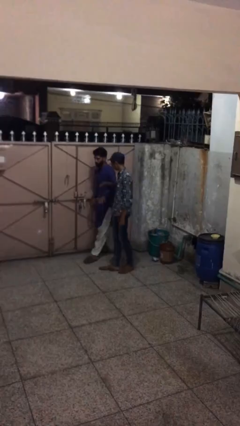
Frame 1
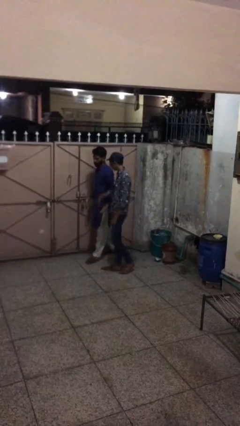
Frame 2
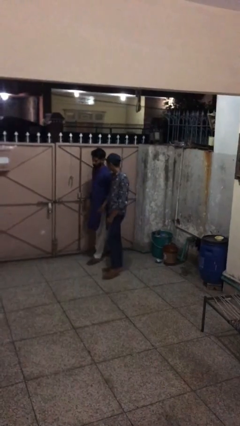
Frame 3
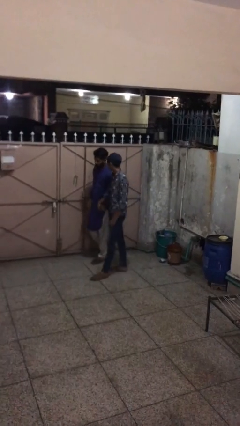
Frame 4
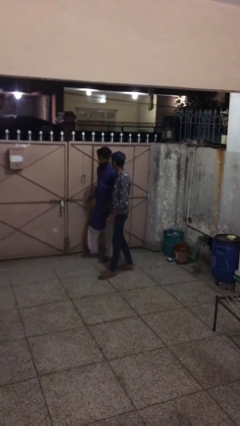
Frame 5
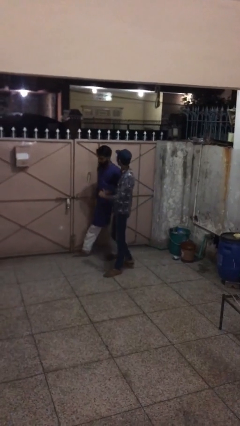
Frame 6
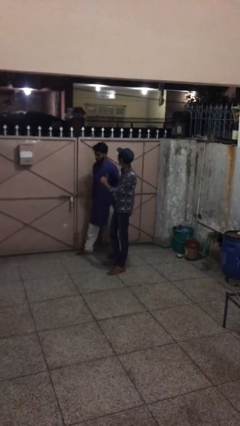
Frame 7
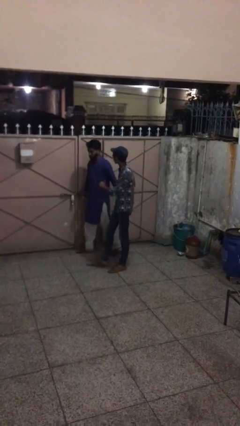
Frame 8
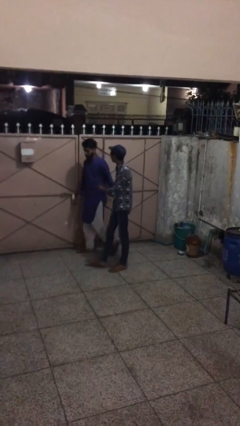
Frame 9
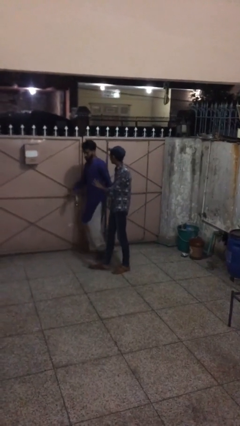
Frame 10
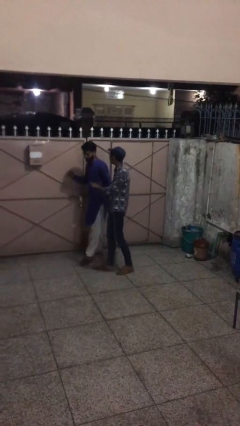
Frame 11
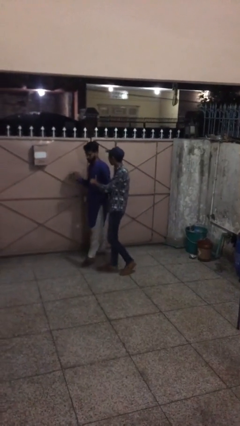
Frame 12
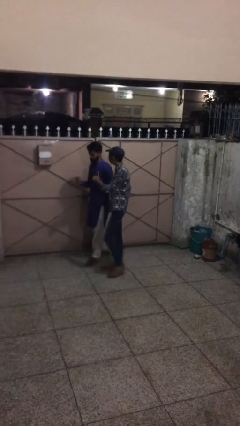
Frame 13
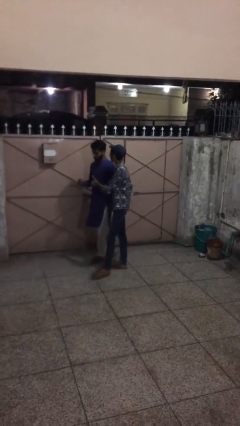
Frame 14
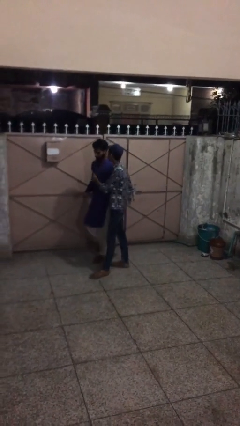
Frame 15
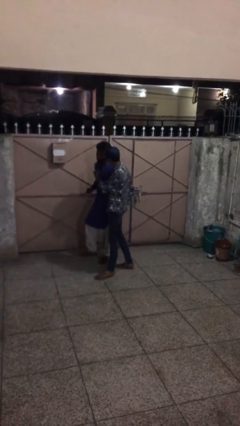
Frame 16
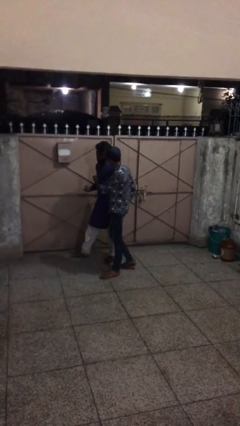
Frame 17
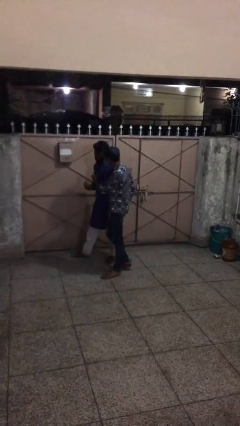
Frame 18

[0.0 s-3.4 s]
person holds hand

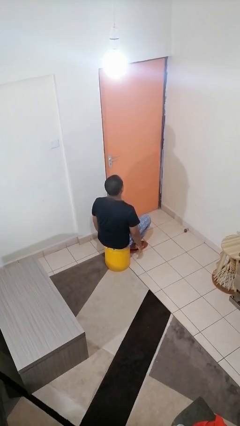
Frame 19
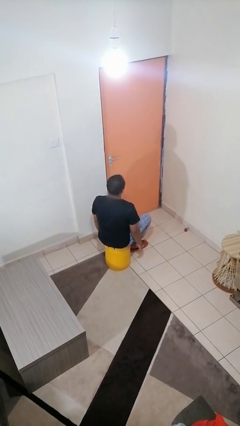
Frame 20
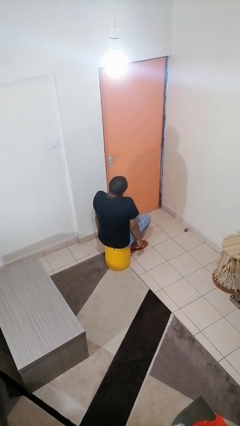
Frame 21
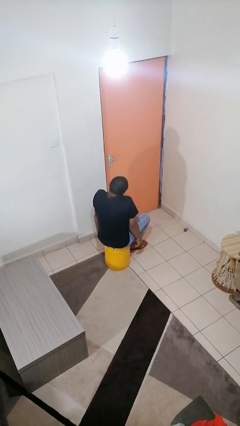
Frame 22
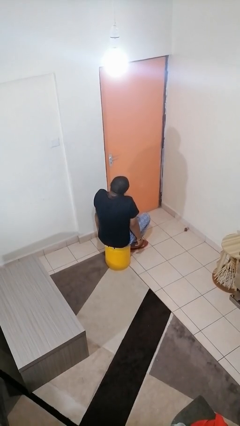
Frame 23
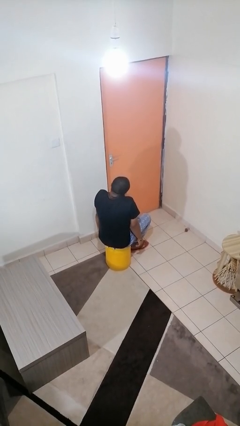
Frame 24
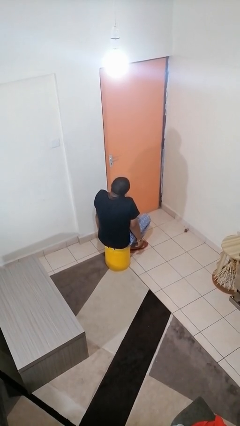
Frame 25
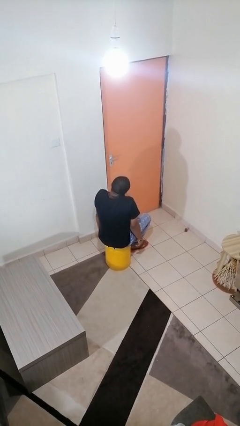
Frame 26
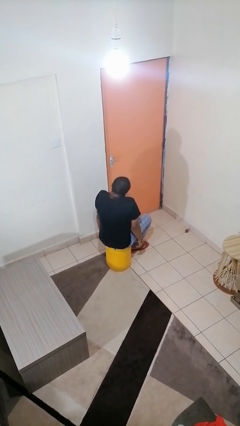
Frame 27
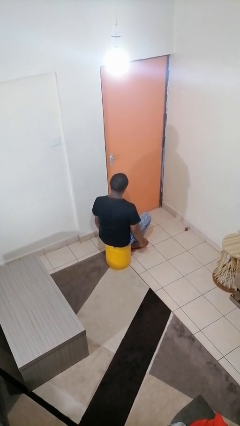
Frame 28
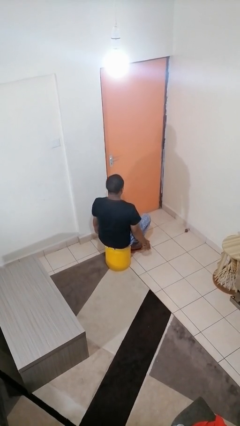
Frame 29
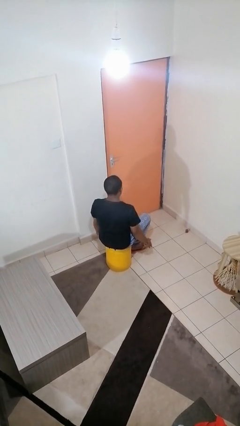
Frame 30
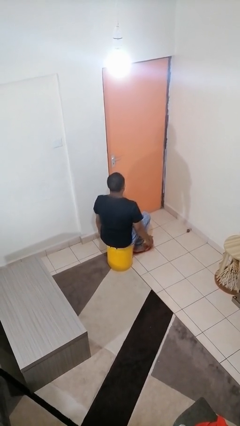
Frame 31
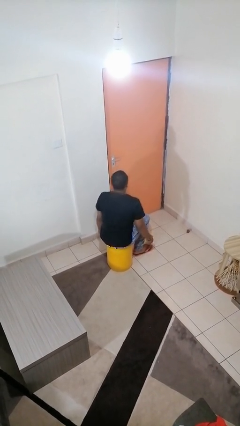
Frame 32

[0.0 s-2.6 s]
person shrugs

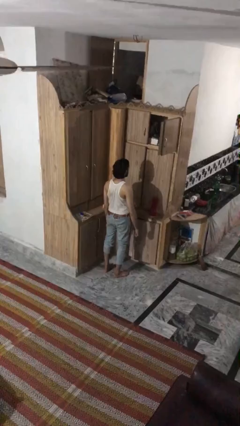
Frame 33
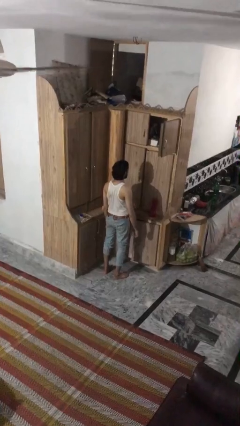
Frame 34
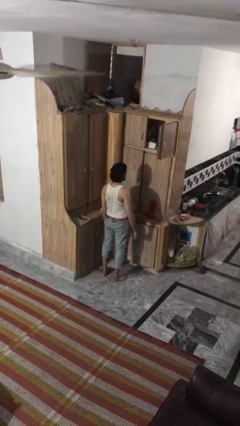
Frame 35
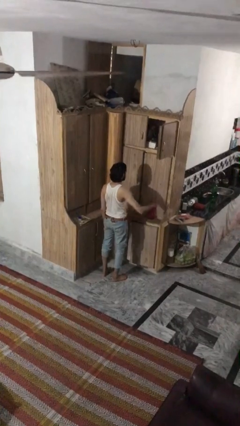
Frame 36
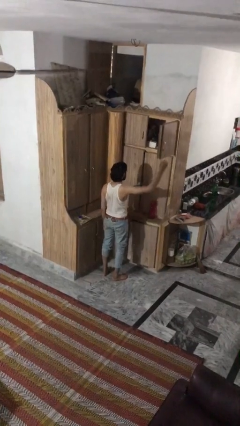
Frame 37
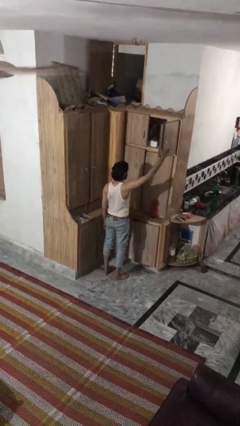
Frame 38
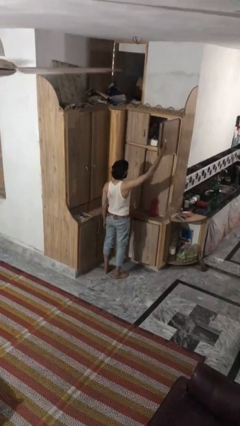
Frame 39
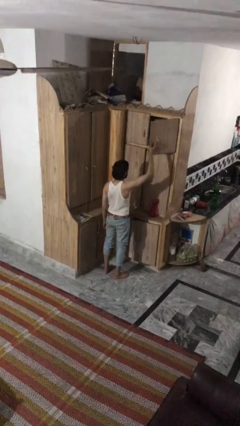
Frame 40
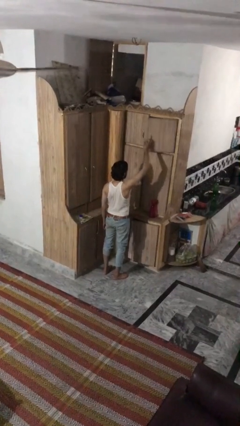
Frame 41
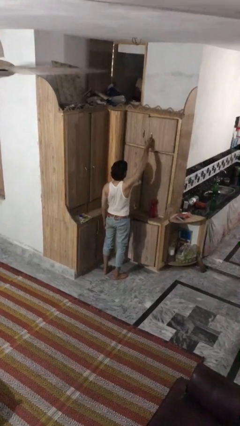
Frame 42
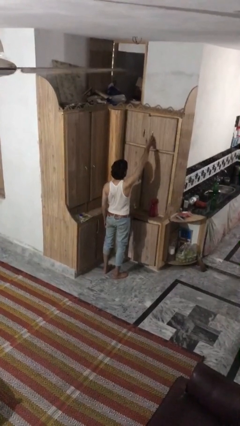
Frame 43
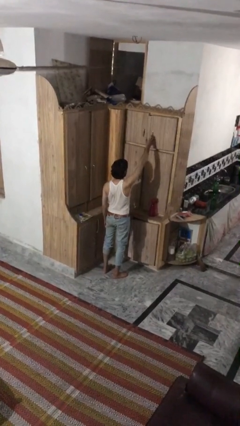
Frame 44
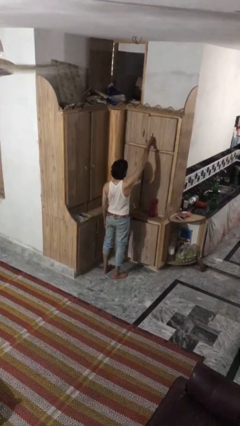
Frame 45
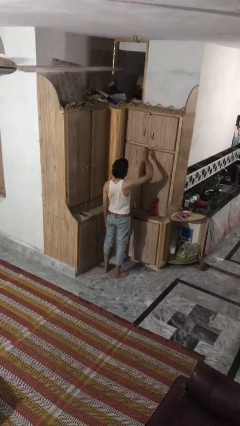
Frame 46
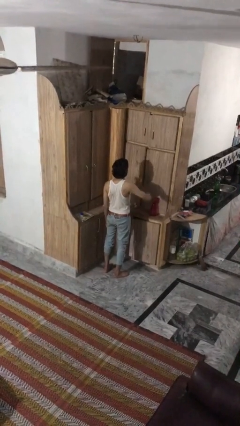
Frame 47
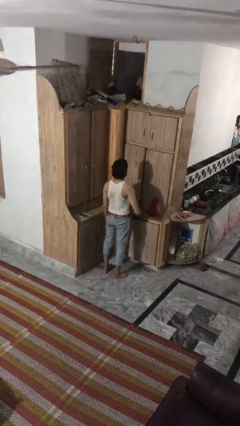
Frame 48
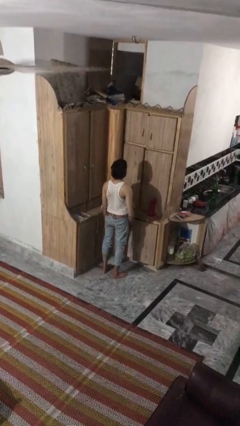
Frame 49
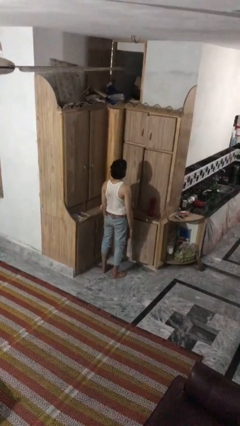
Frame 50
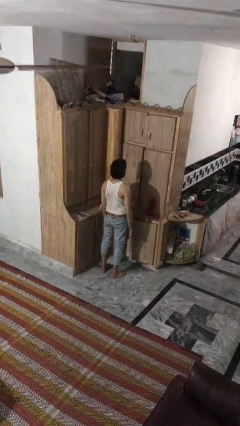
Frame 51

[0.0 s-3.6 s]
person closes cabinet

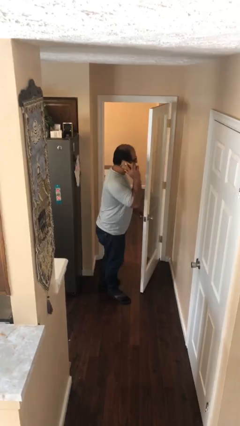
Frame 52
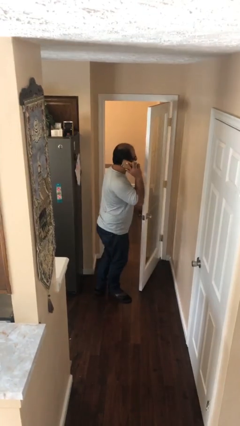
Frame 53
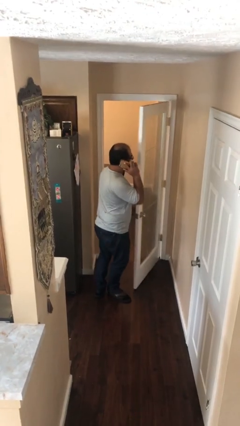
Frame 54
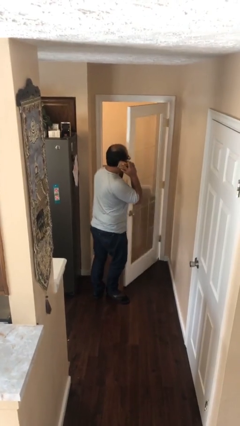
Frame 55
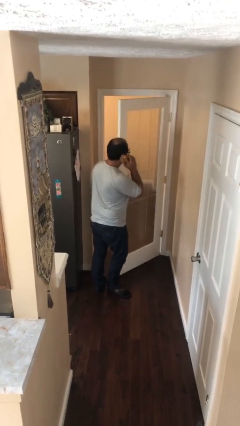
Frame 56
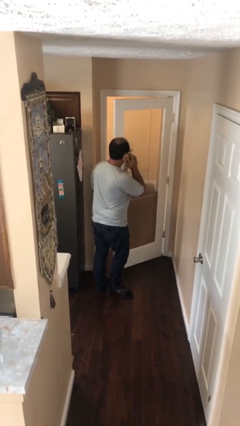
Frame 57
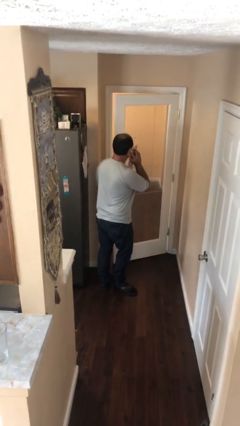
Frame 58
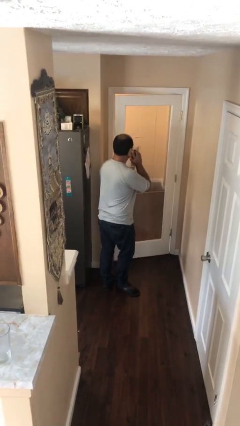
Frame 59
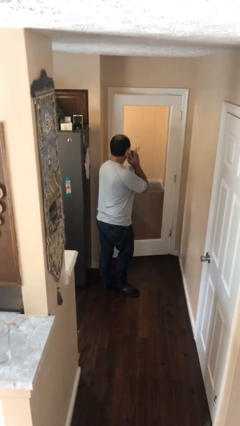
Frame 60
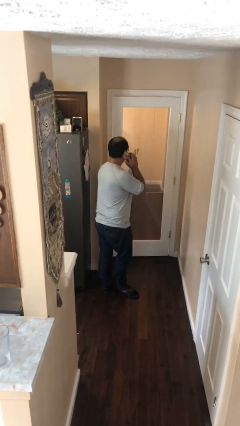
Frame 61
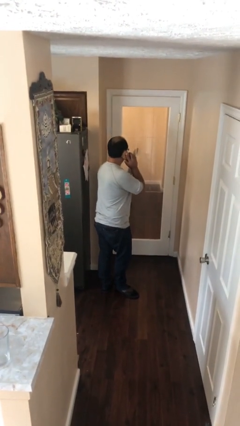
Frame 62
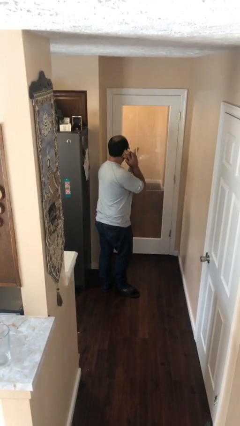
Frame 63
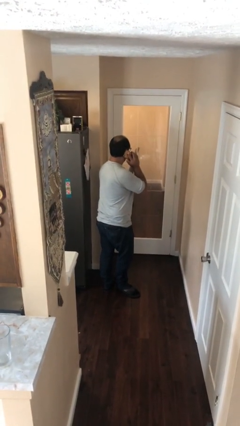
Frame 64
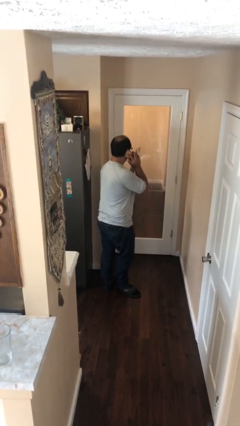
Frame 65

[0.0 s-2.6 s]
person closes facility door

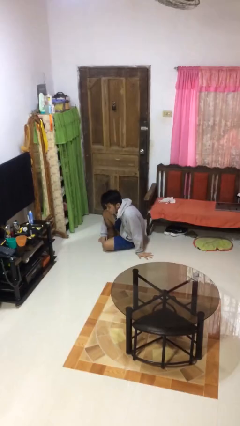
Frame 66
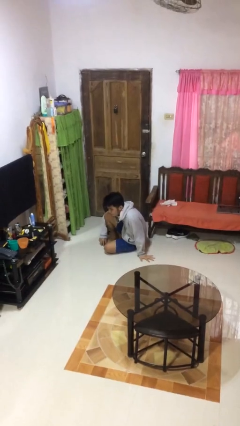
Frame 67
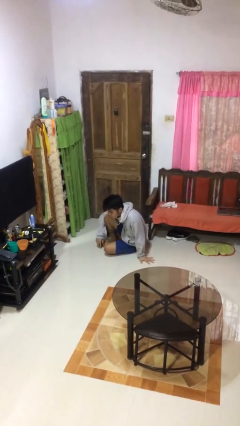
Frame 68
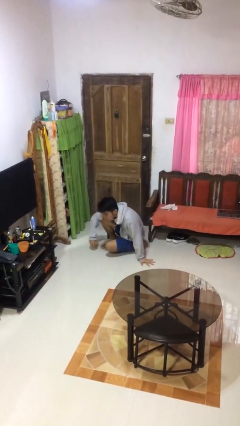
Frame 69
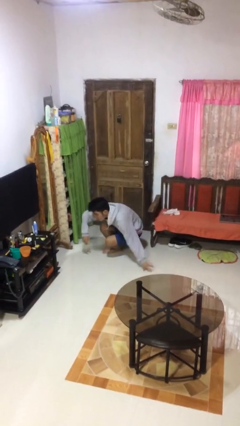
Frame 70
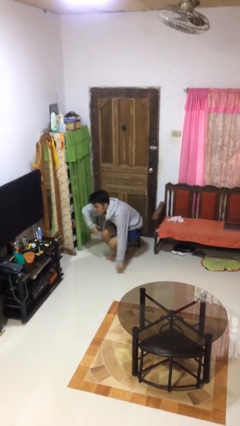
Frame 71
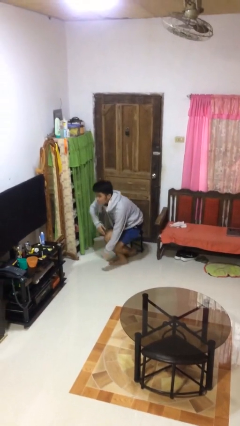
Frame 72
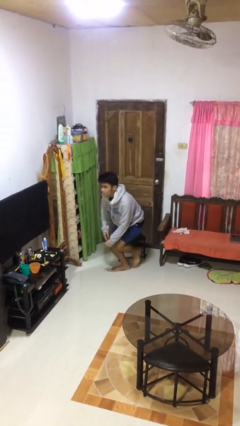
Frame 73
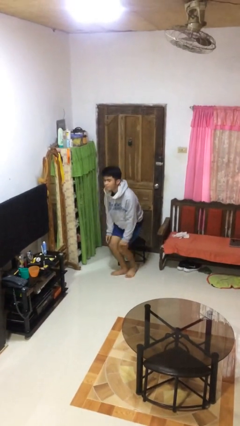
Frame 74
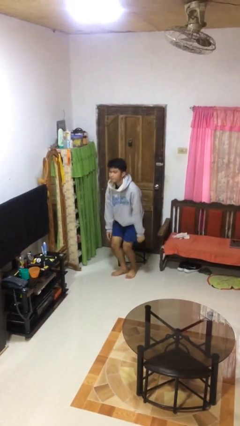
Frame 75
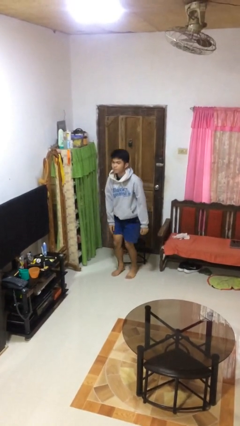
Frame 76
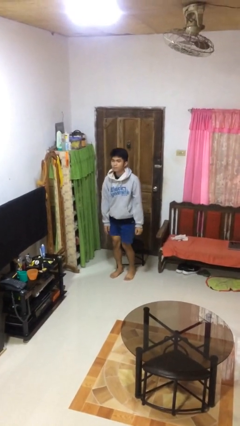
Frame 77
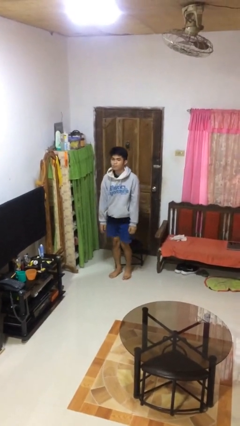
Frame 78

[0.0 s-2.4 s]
person stands up from floor

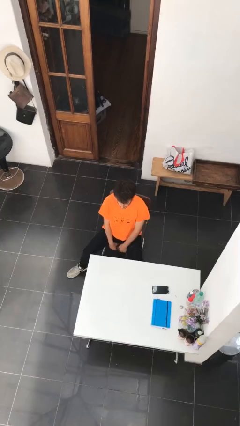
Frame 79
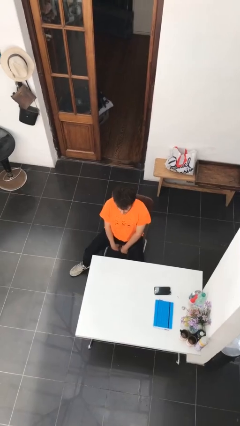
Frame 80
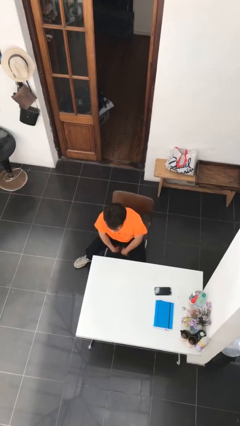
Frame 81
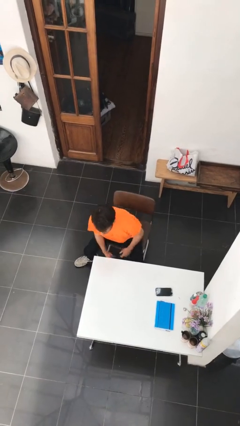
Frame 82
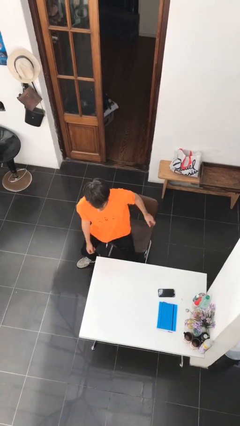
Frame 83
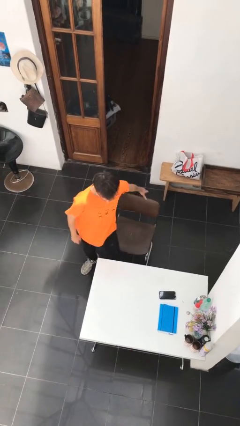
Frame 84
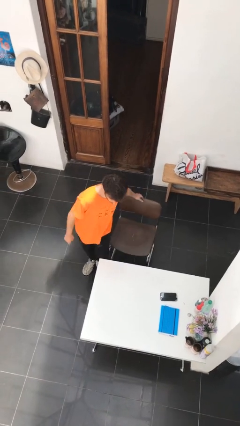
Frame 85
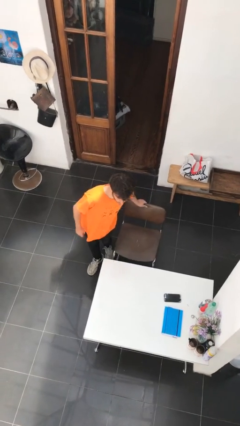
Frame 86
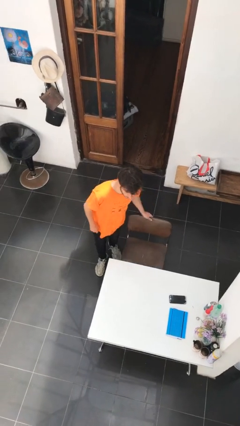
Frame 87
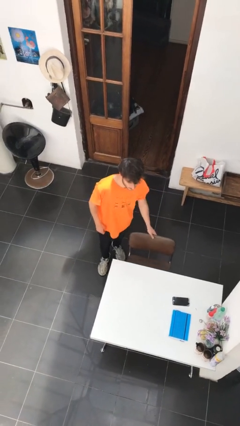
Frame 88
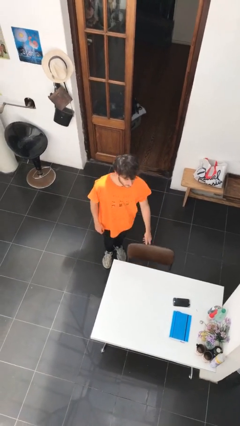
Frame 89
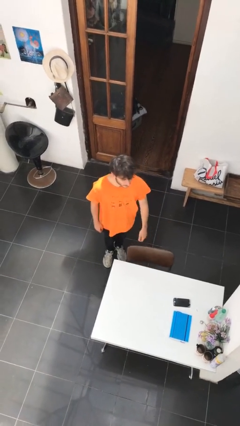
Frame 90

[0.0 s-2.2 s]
person stands up

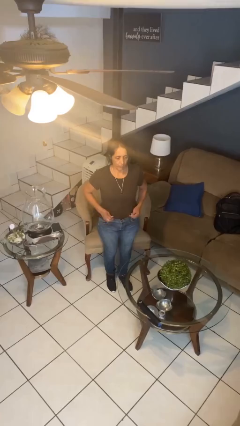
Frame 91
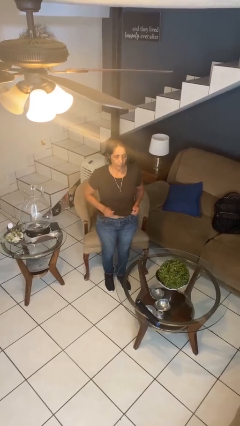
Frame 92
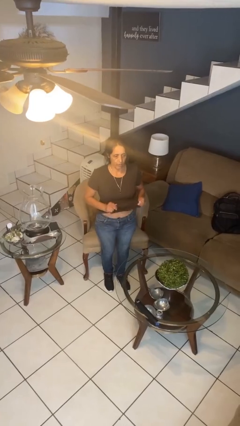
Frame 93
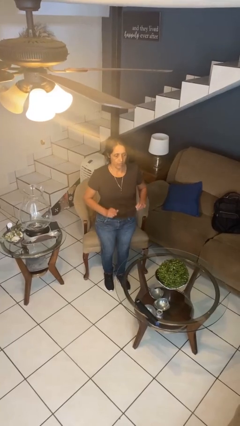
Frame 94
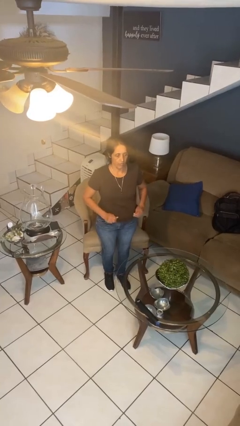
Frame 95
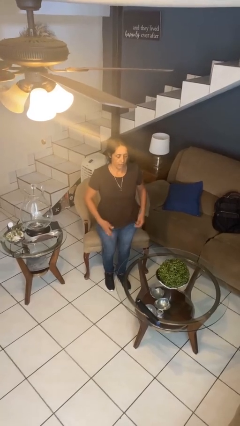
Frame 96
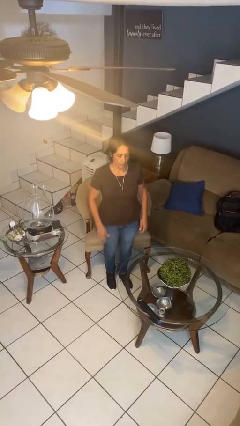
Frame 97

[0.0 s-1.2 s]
person untucks shirt
